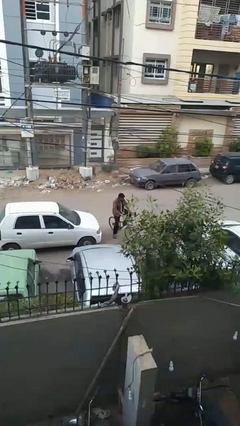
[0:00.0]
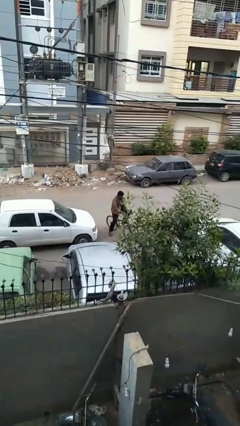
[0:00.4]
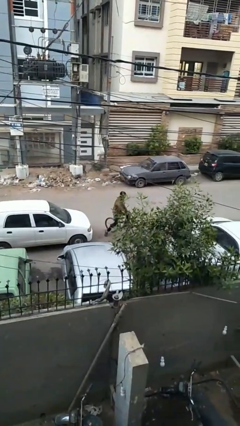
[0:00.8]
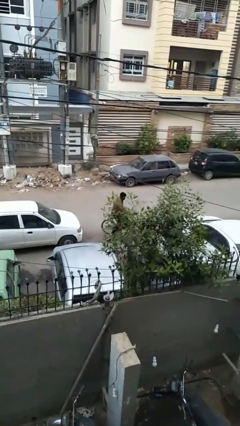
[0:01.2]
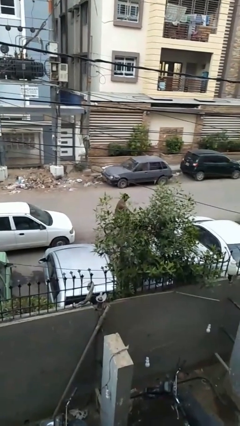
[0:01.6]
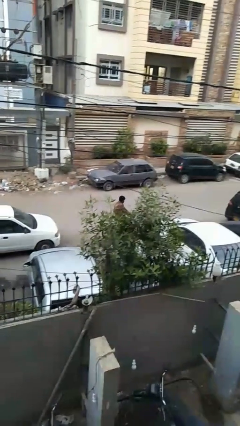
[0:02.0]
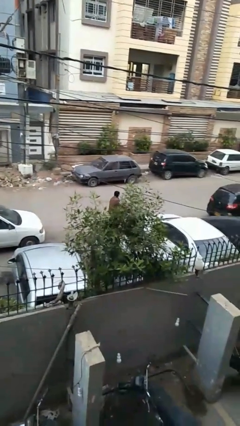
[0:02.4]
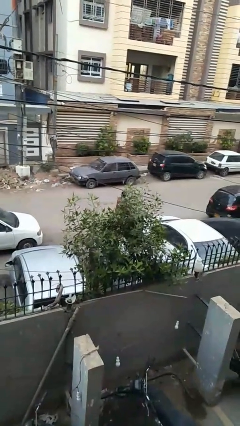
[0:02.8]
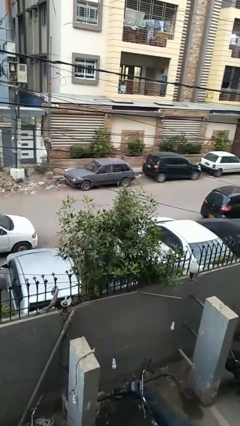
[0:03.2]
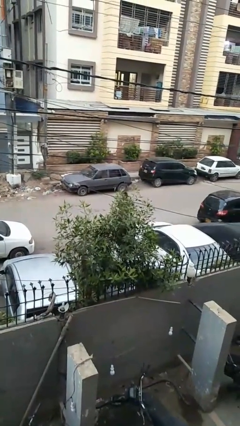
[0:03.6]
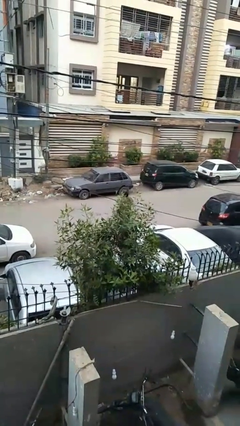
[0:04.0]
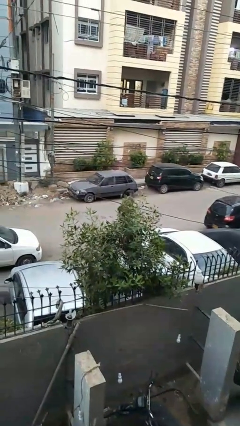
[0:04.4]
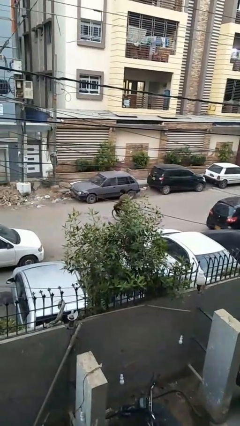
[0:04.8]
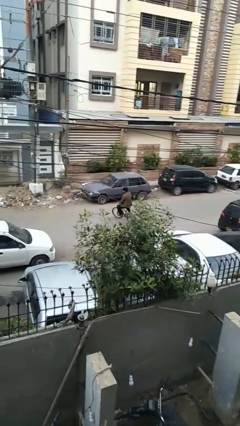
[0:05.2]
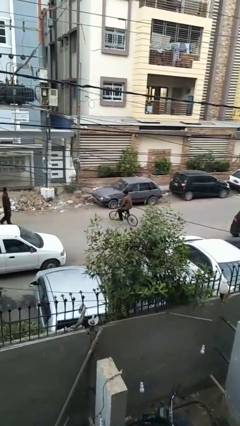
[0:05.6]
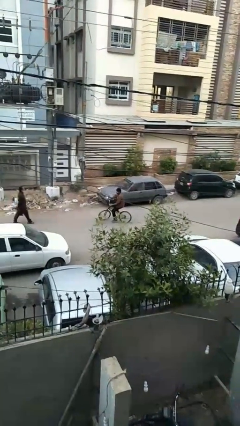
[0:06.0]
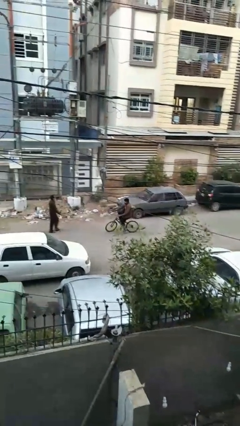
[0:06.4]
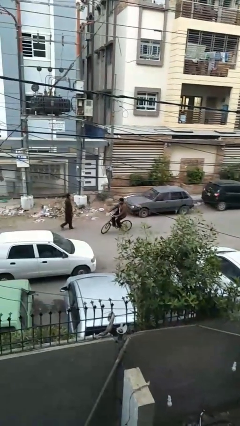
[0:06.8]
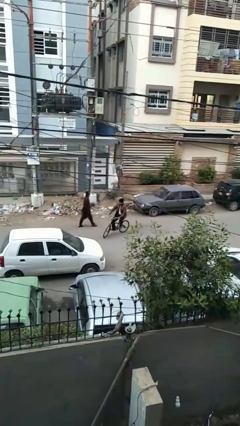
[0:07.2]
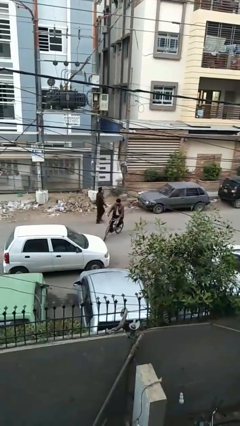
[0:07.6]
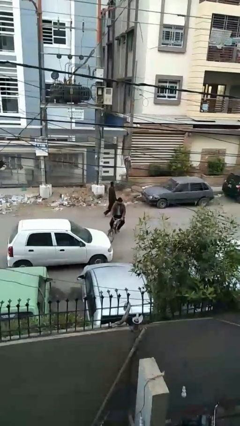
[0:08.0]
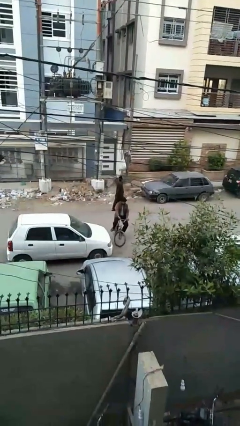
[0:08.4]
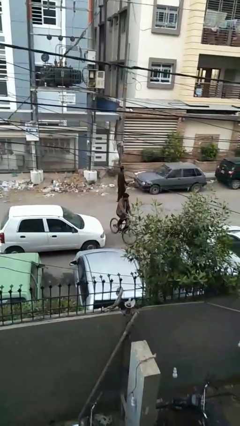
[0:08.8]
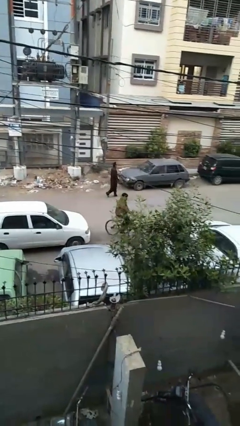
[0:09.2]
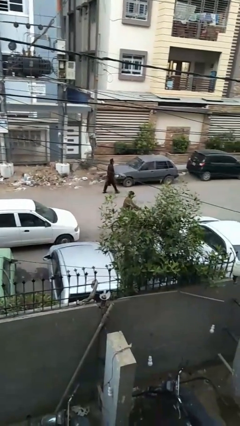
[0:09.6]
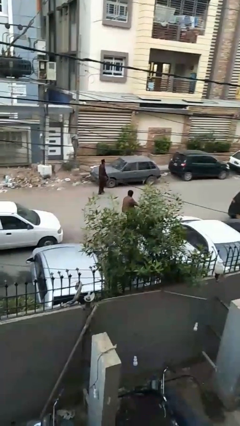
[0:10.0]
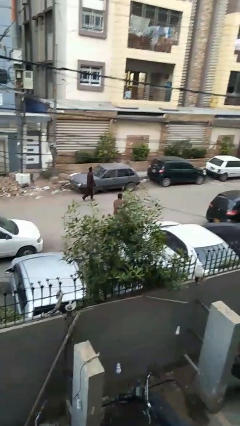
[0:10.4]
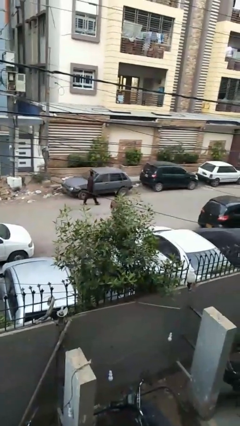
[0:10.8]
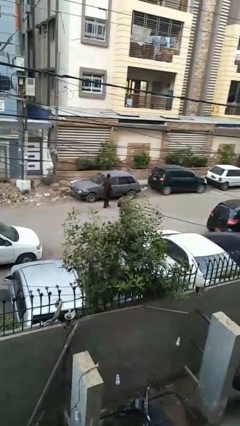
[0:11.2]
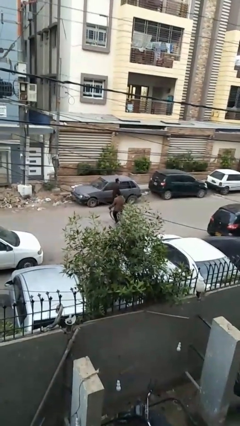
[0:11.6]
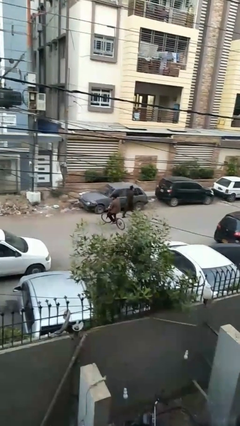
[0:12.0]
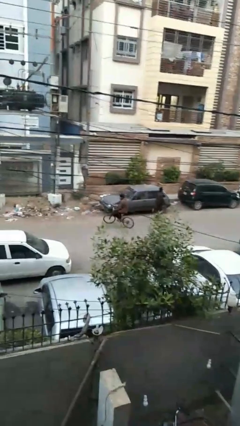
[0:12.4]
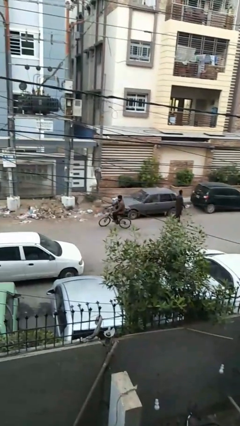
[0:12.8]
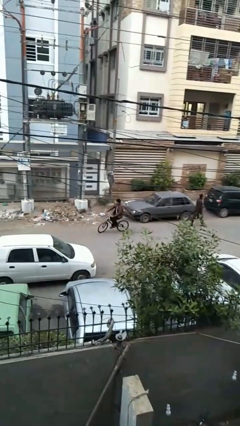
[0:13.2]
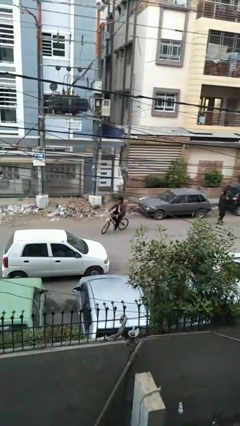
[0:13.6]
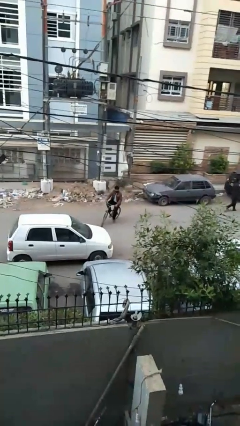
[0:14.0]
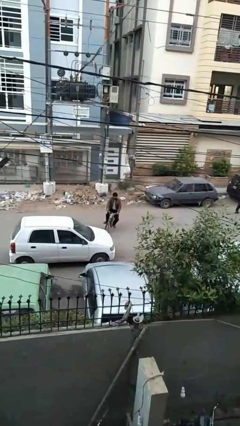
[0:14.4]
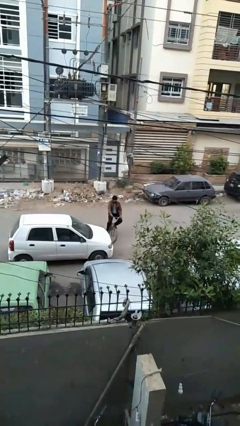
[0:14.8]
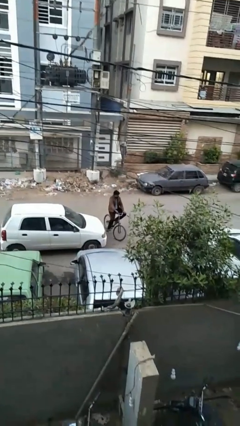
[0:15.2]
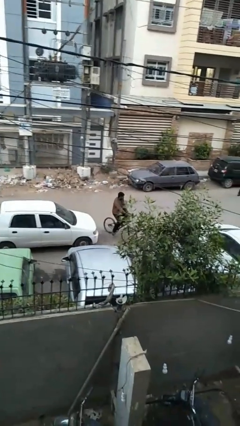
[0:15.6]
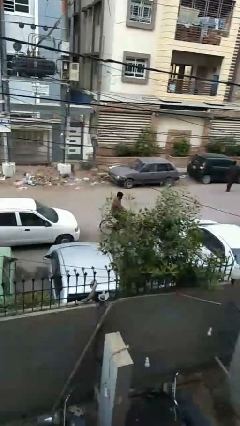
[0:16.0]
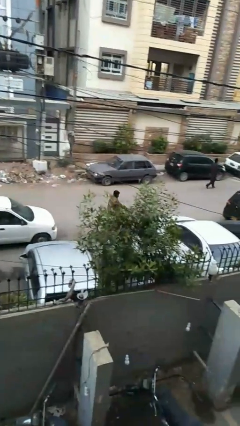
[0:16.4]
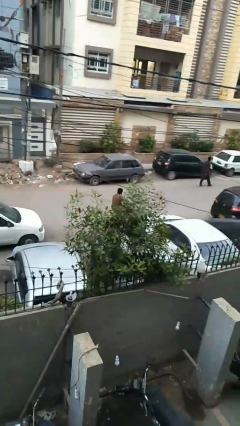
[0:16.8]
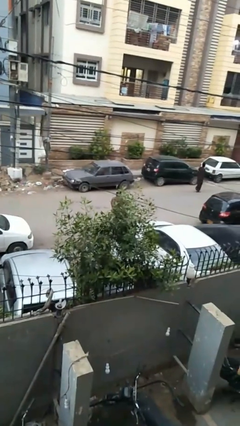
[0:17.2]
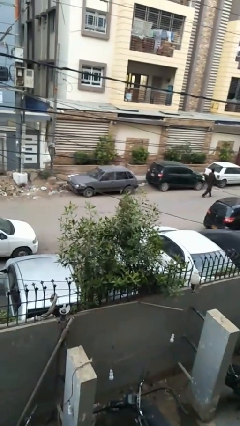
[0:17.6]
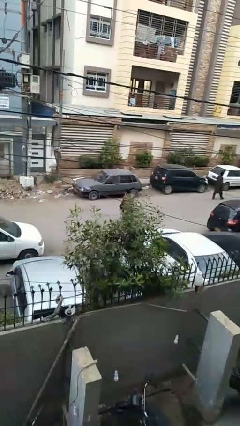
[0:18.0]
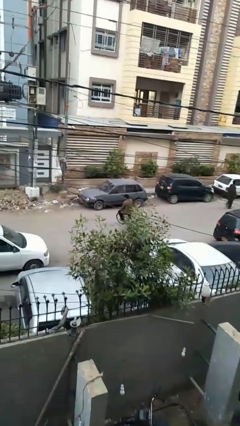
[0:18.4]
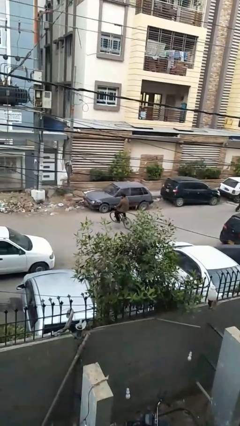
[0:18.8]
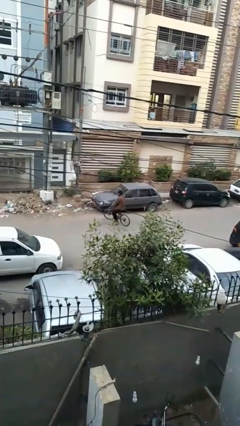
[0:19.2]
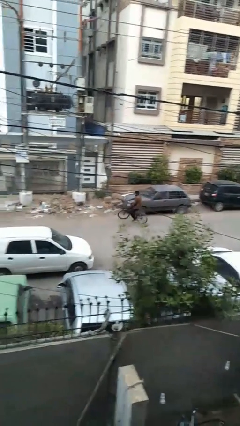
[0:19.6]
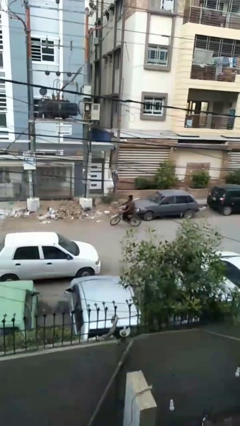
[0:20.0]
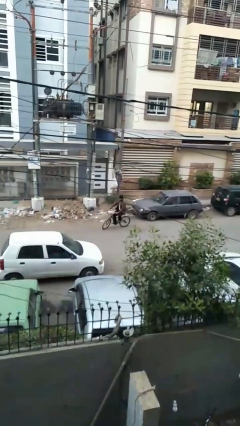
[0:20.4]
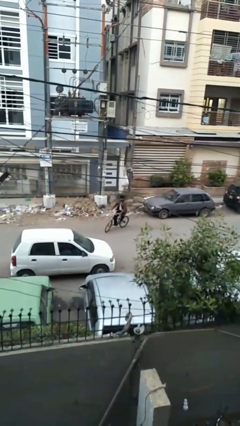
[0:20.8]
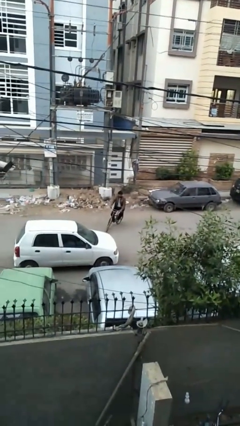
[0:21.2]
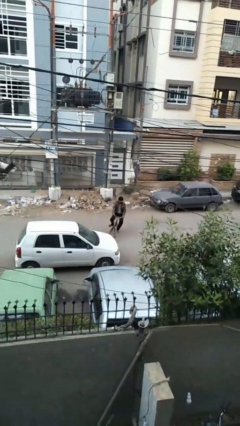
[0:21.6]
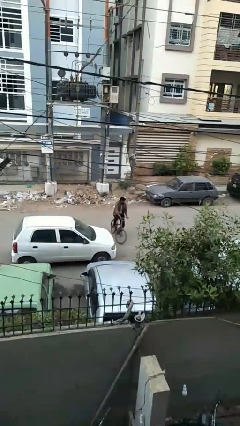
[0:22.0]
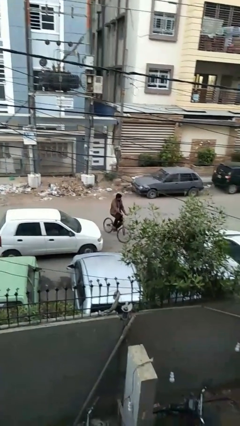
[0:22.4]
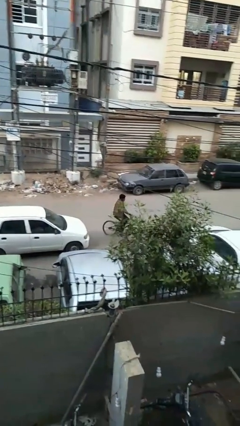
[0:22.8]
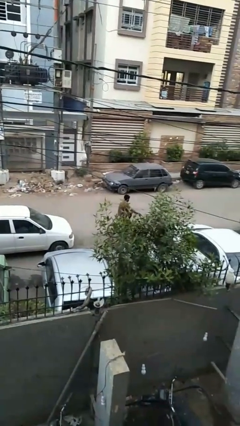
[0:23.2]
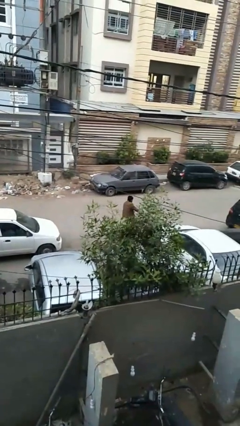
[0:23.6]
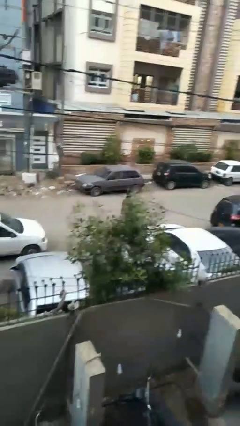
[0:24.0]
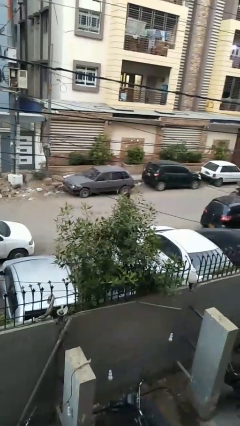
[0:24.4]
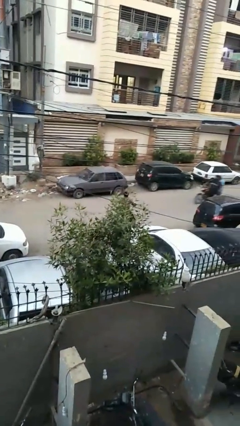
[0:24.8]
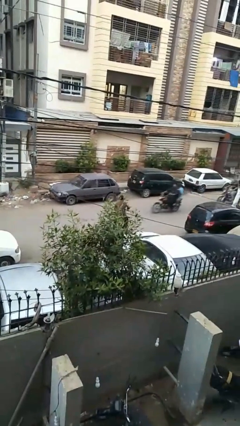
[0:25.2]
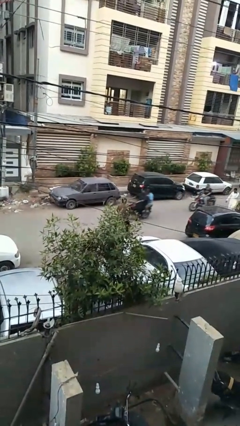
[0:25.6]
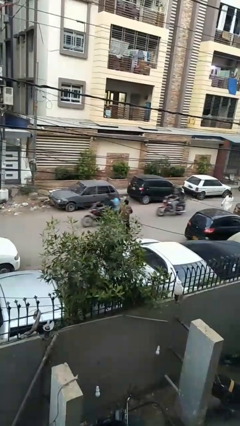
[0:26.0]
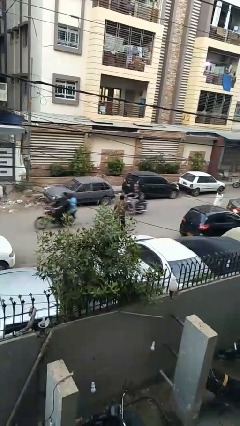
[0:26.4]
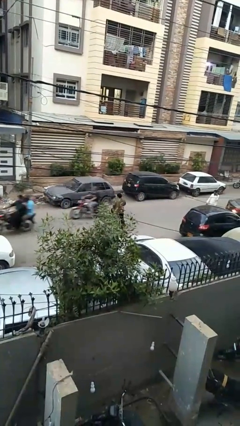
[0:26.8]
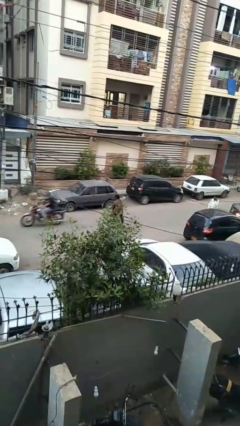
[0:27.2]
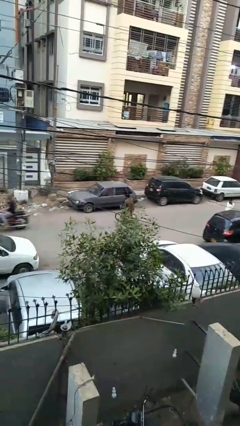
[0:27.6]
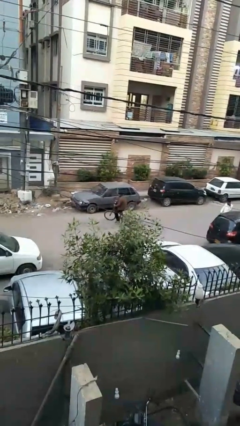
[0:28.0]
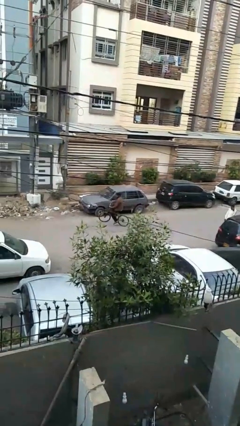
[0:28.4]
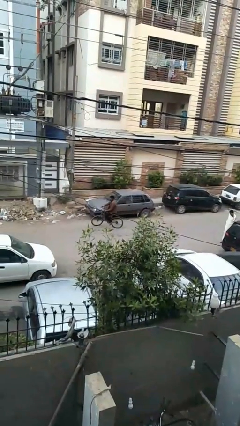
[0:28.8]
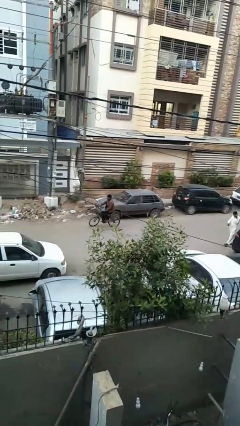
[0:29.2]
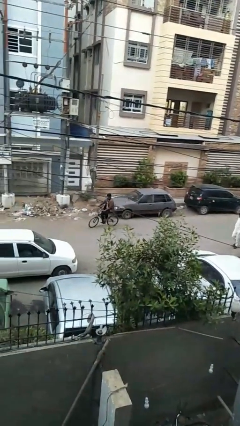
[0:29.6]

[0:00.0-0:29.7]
person rides bicycle

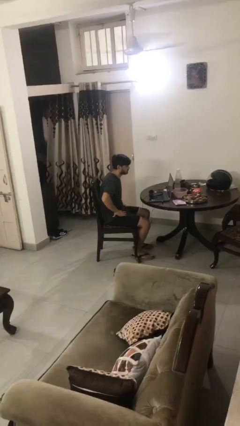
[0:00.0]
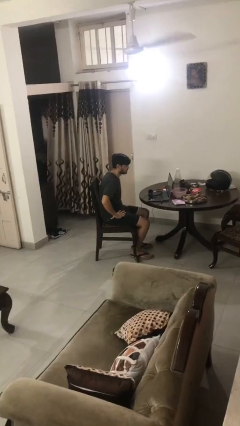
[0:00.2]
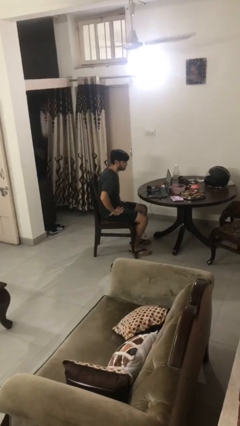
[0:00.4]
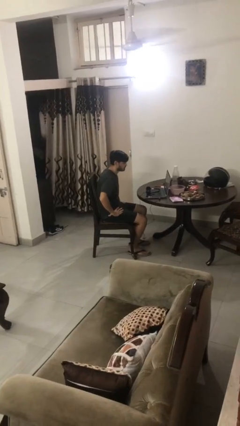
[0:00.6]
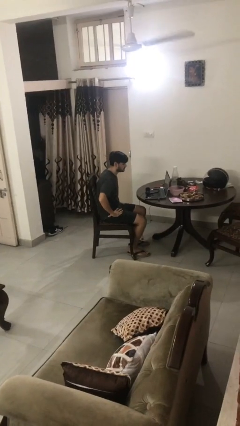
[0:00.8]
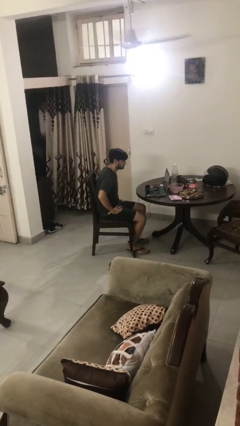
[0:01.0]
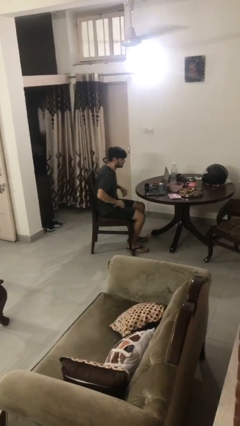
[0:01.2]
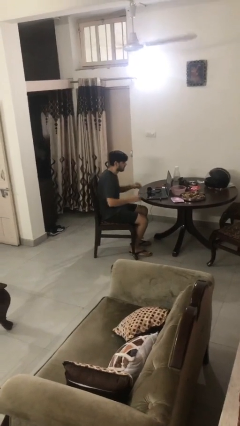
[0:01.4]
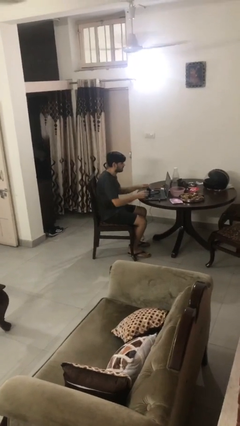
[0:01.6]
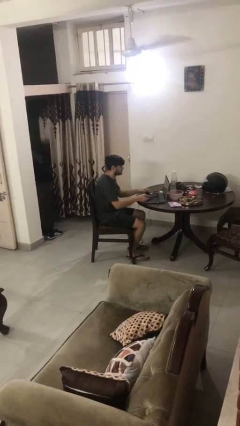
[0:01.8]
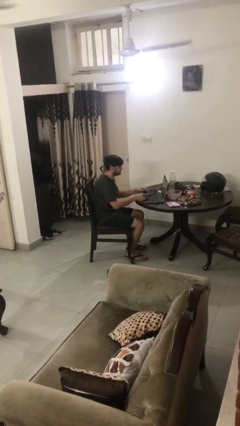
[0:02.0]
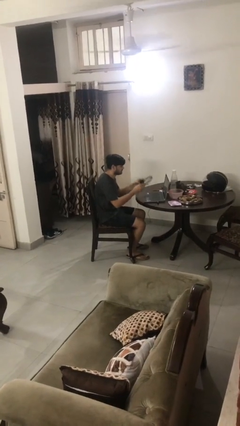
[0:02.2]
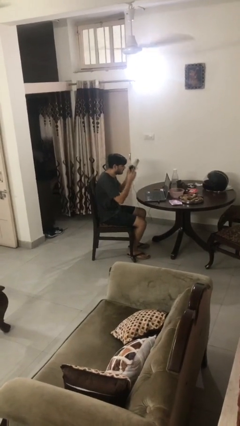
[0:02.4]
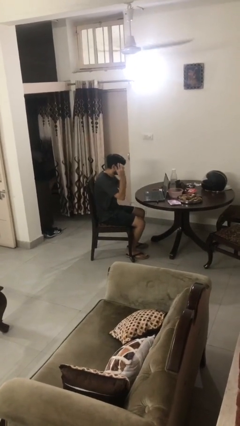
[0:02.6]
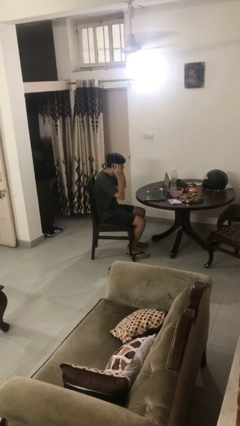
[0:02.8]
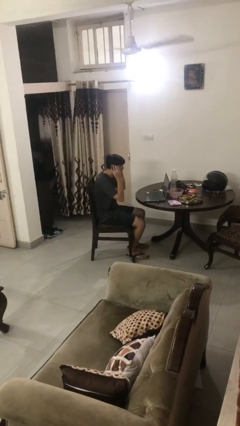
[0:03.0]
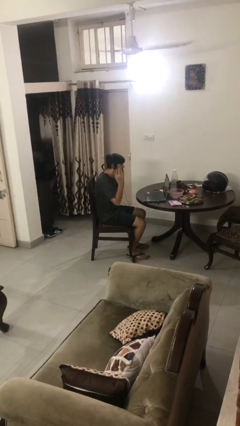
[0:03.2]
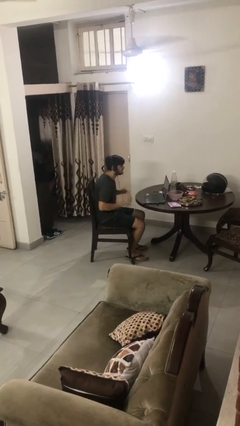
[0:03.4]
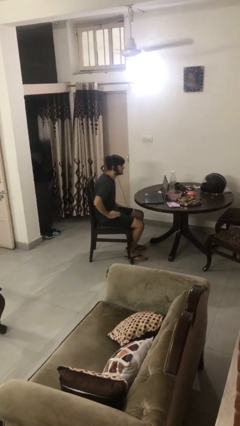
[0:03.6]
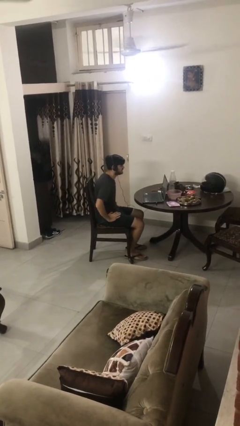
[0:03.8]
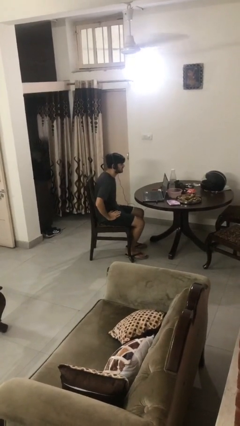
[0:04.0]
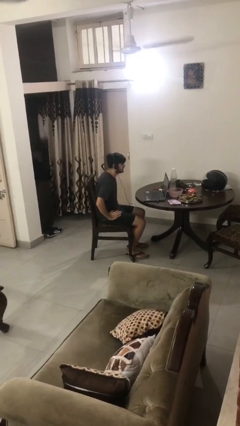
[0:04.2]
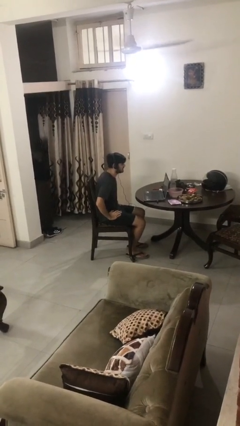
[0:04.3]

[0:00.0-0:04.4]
person puts on headphones
